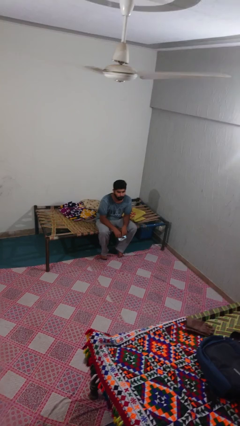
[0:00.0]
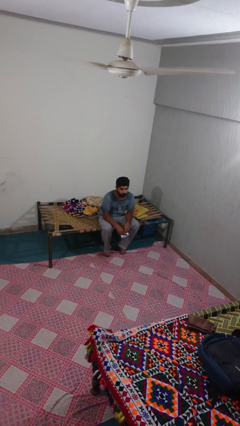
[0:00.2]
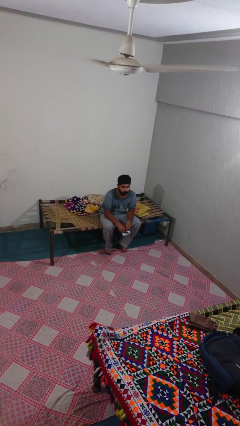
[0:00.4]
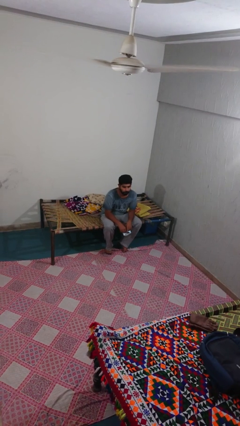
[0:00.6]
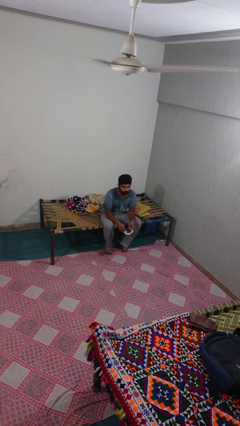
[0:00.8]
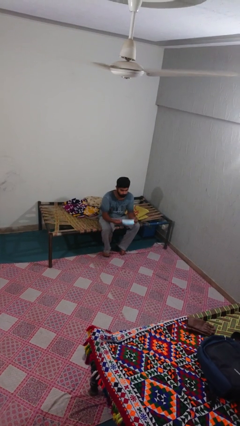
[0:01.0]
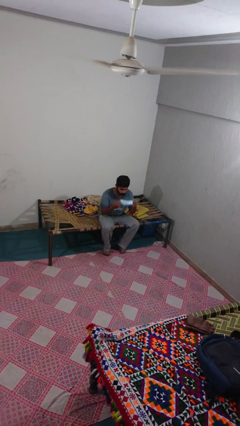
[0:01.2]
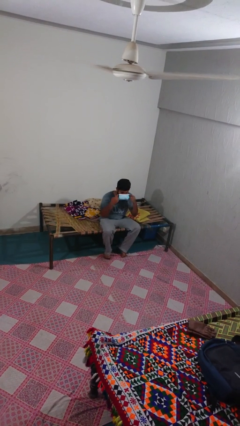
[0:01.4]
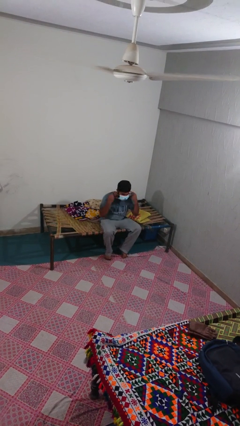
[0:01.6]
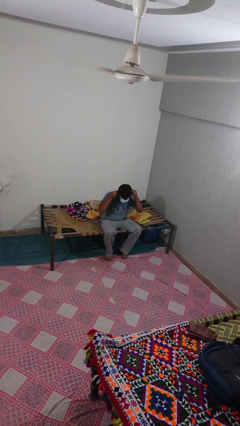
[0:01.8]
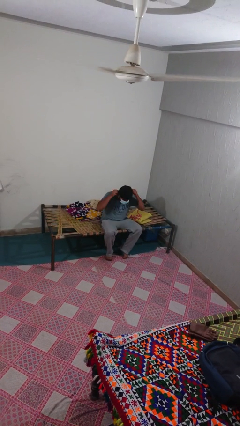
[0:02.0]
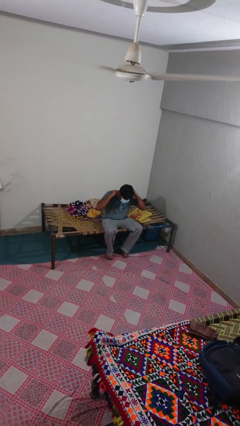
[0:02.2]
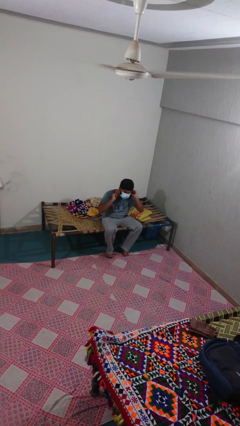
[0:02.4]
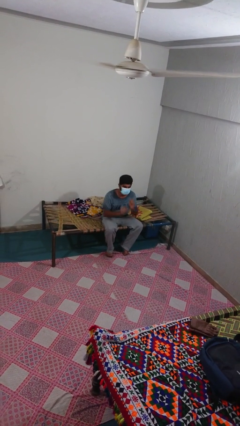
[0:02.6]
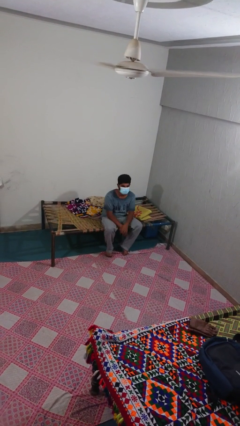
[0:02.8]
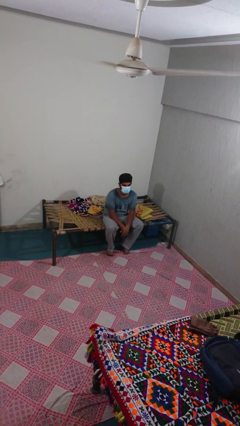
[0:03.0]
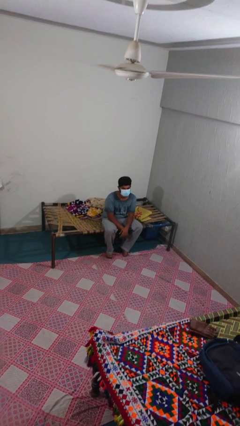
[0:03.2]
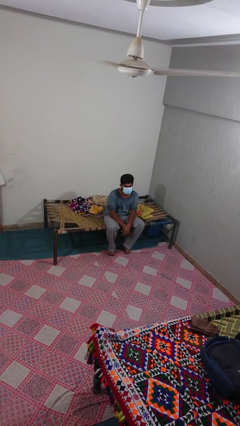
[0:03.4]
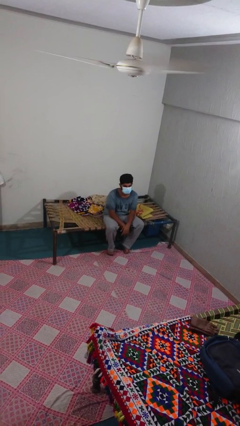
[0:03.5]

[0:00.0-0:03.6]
person puts on facemask

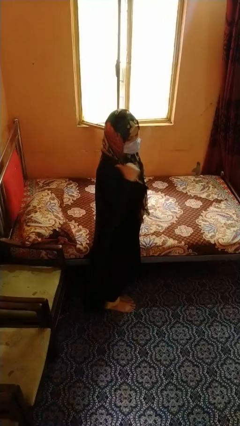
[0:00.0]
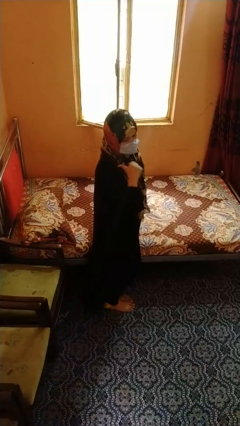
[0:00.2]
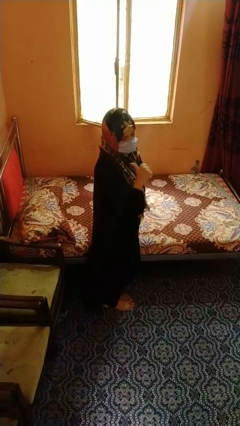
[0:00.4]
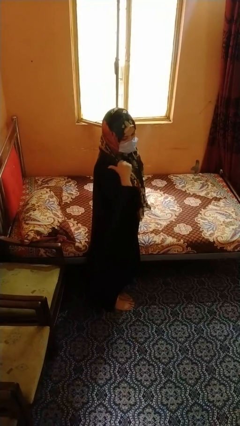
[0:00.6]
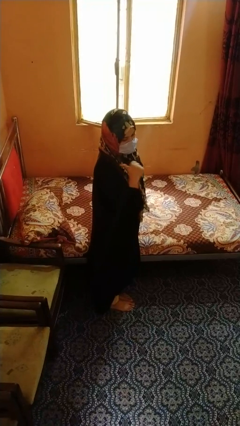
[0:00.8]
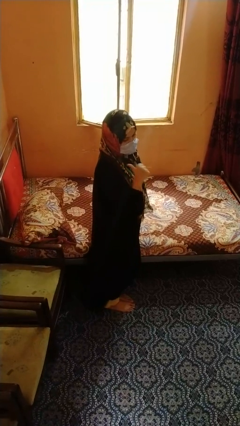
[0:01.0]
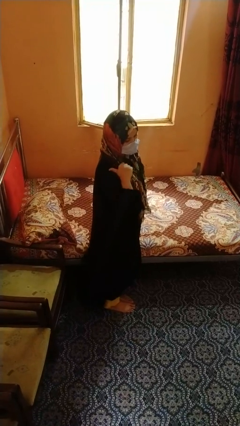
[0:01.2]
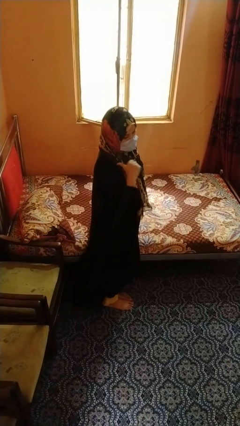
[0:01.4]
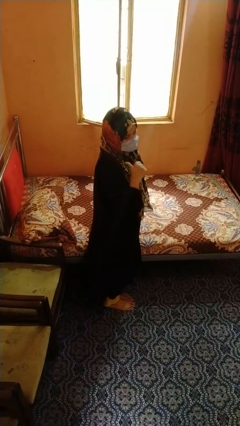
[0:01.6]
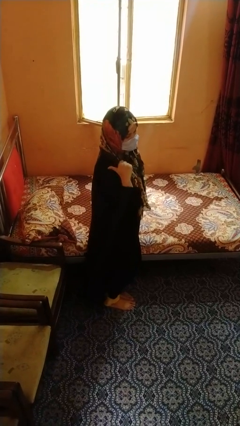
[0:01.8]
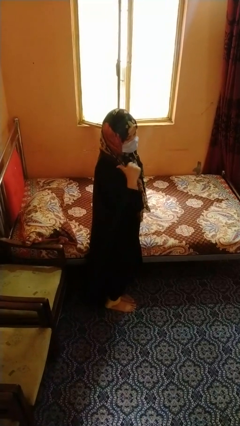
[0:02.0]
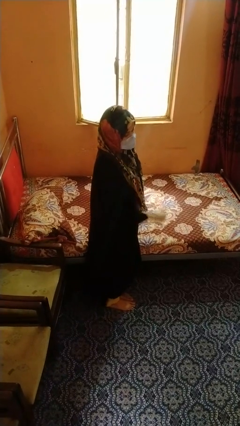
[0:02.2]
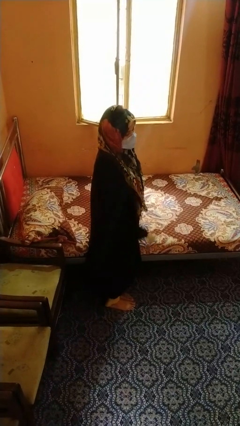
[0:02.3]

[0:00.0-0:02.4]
person gestures behind me

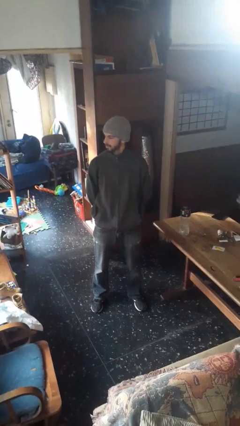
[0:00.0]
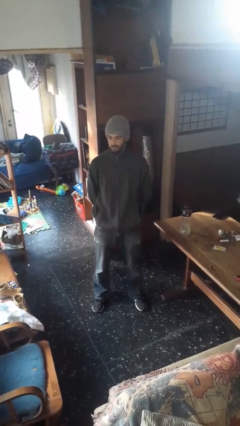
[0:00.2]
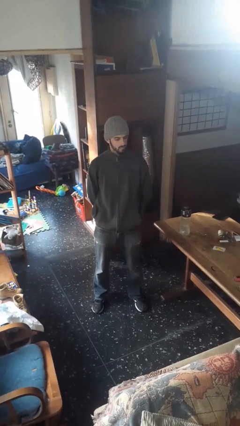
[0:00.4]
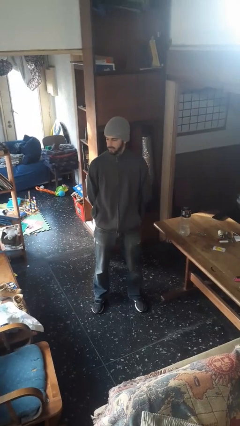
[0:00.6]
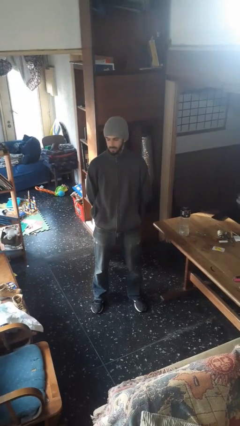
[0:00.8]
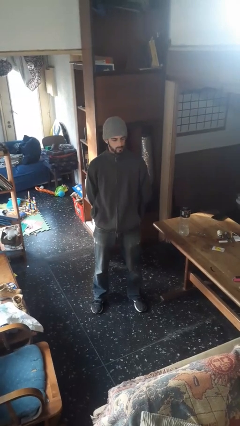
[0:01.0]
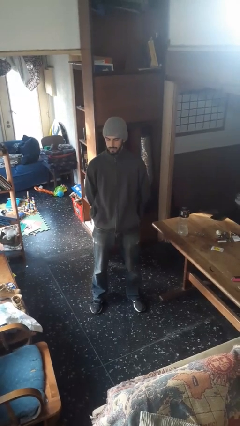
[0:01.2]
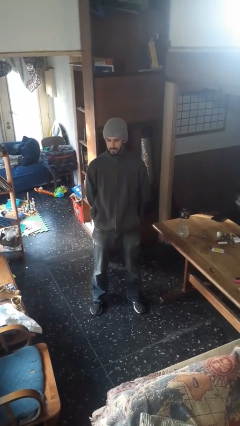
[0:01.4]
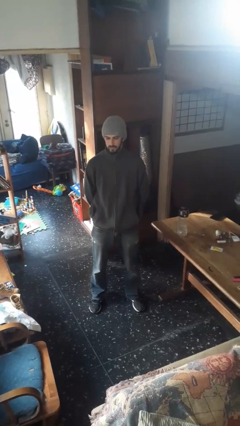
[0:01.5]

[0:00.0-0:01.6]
person shakes head

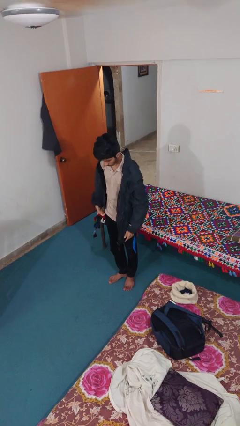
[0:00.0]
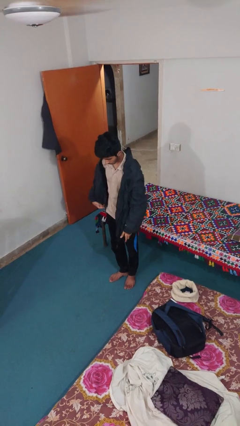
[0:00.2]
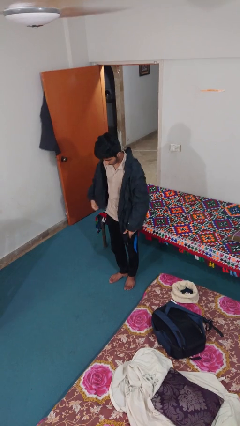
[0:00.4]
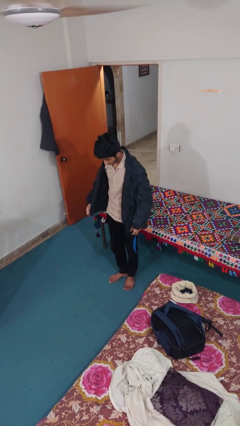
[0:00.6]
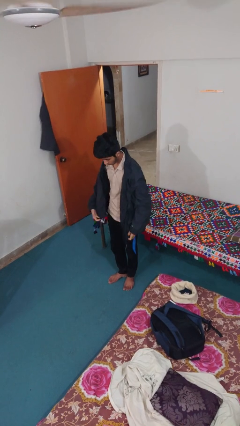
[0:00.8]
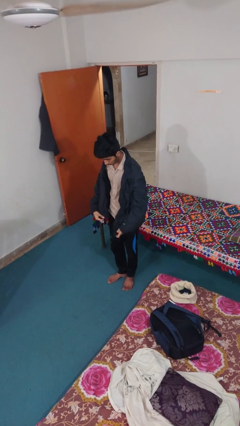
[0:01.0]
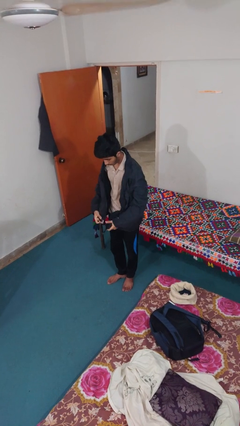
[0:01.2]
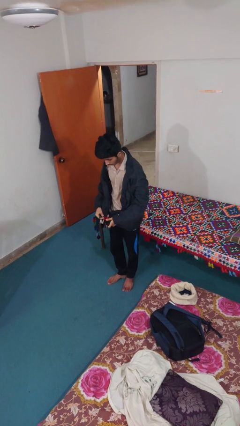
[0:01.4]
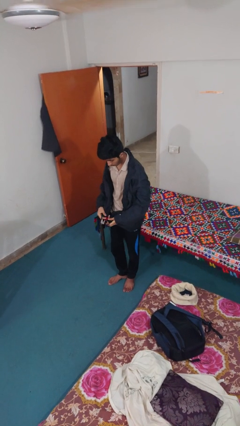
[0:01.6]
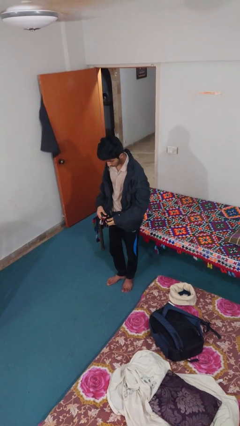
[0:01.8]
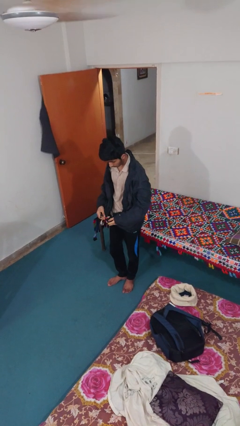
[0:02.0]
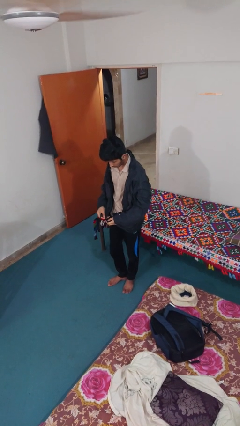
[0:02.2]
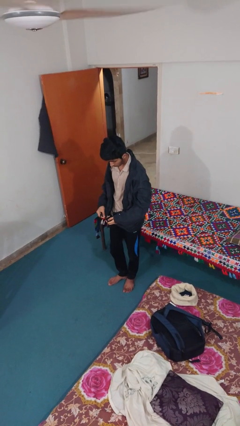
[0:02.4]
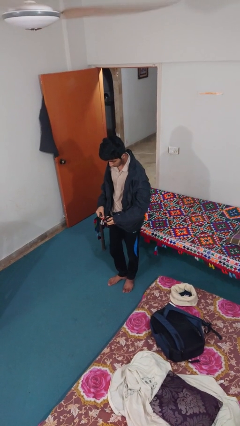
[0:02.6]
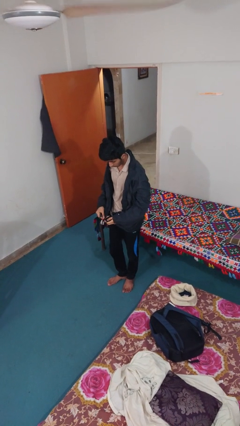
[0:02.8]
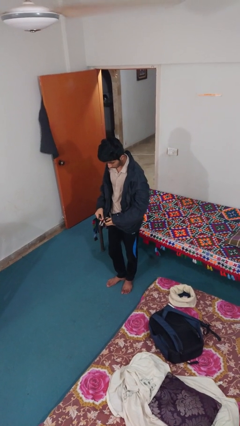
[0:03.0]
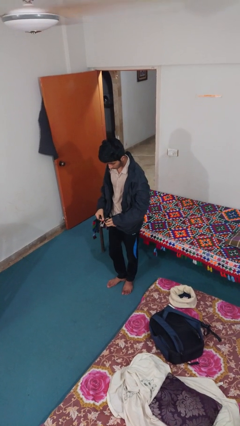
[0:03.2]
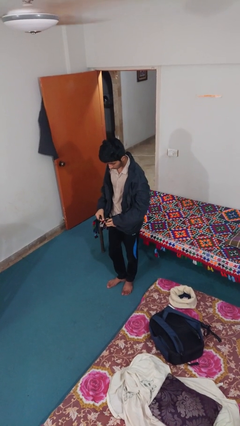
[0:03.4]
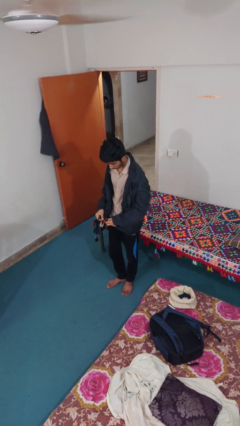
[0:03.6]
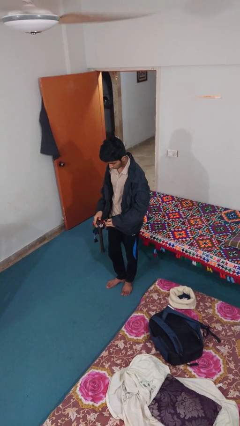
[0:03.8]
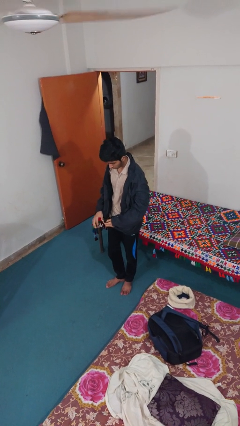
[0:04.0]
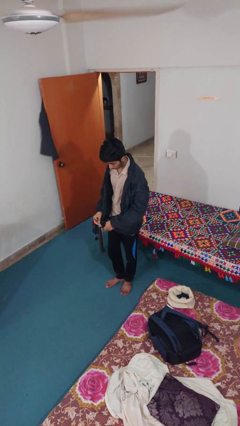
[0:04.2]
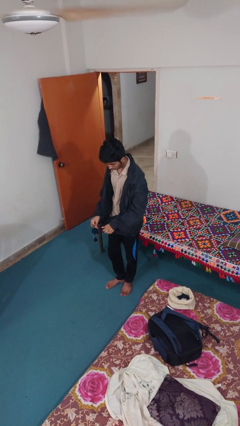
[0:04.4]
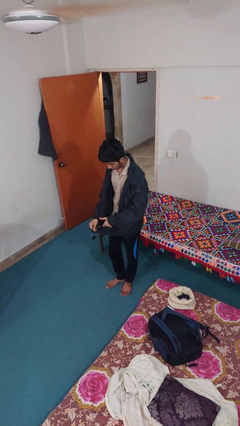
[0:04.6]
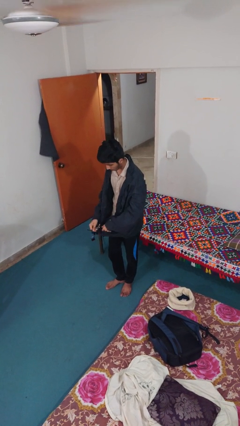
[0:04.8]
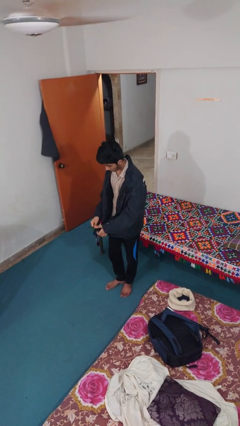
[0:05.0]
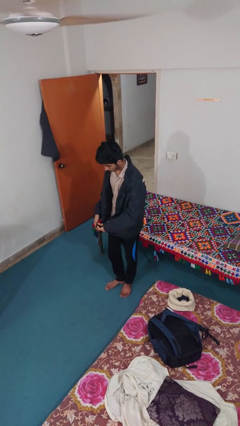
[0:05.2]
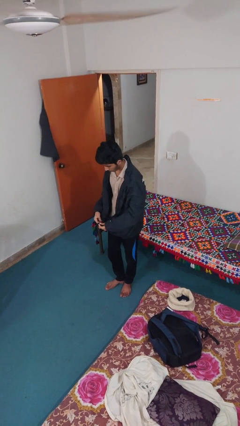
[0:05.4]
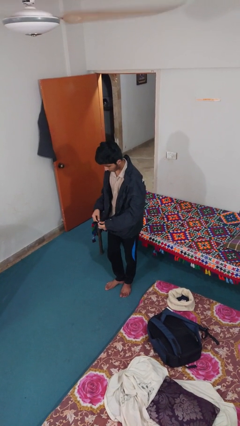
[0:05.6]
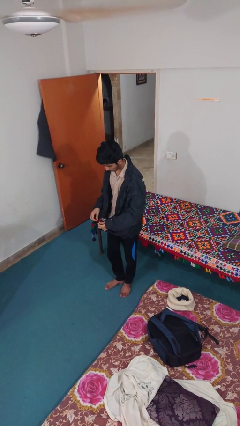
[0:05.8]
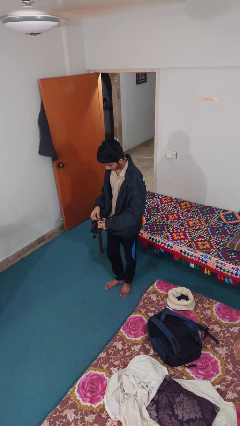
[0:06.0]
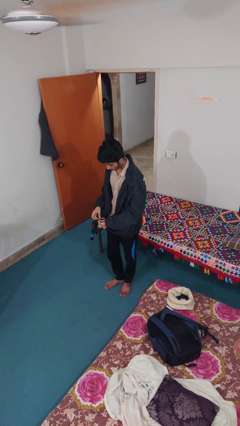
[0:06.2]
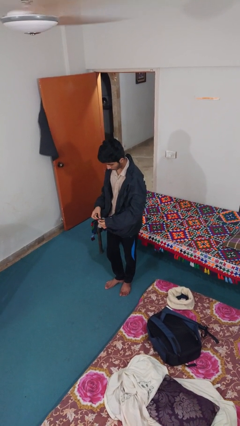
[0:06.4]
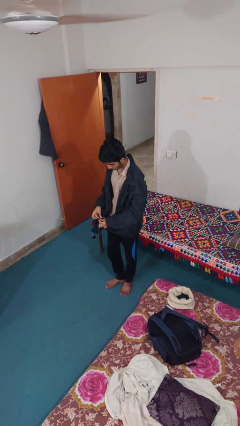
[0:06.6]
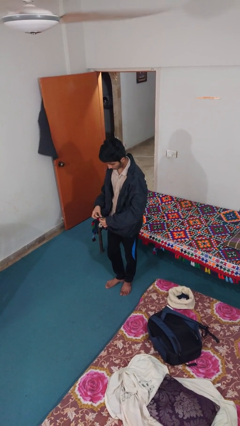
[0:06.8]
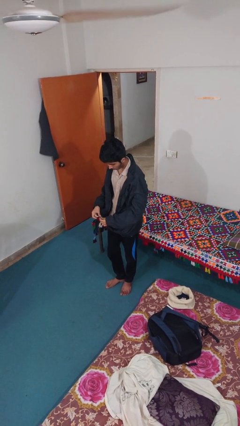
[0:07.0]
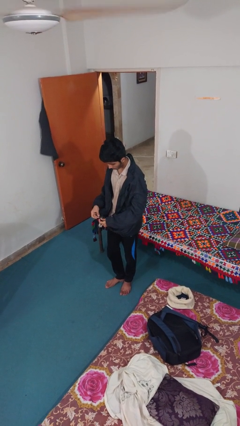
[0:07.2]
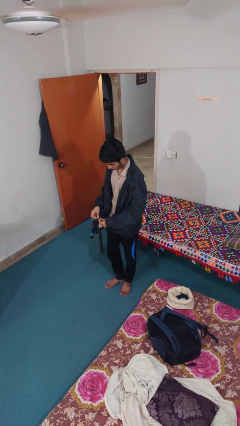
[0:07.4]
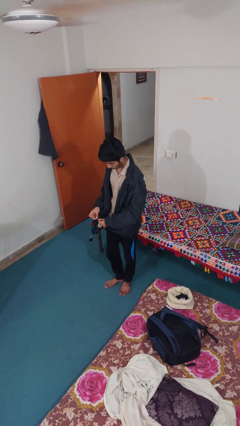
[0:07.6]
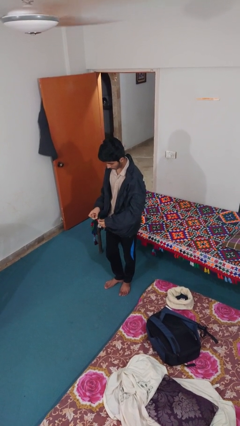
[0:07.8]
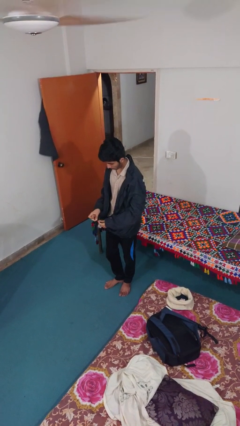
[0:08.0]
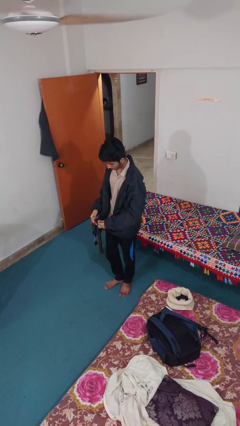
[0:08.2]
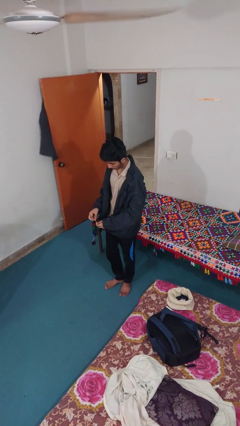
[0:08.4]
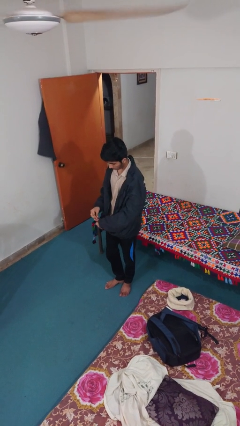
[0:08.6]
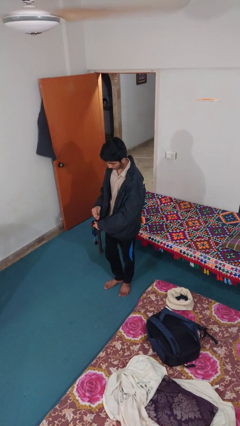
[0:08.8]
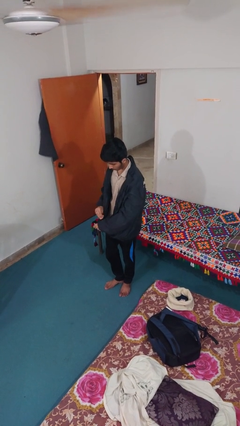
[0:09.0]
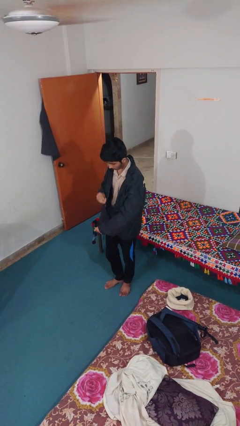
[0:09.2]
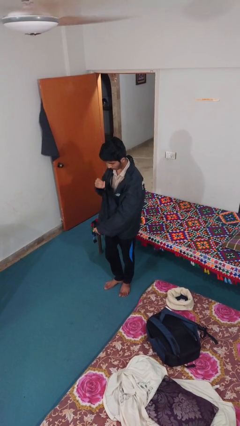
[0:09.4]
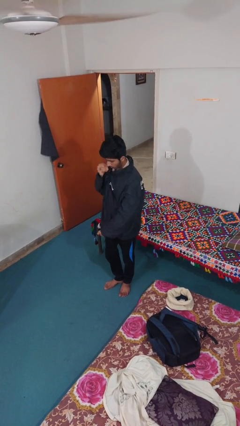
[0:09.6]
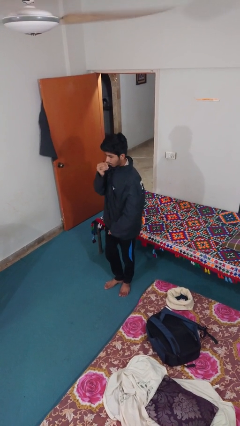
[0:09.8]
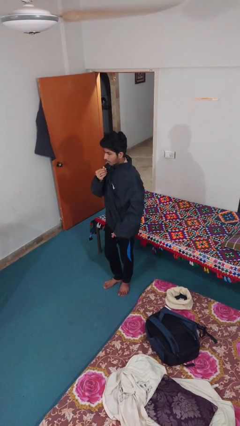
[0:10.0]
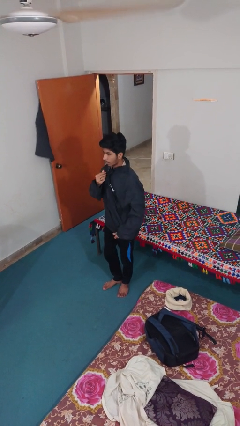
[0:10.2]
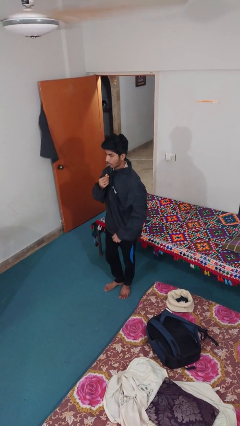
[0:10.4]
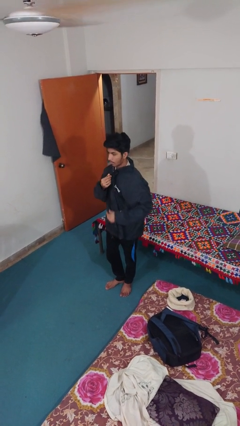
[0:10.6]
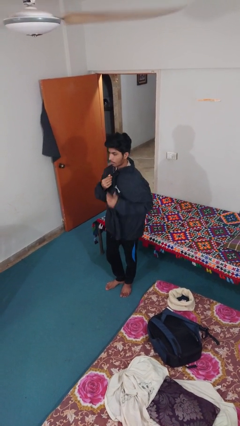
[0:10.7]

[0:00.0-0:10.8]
person zips up jacket
